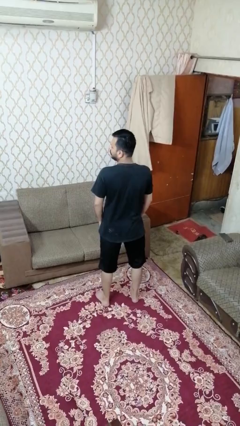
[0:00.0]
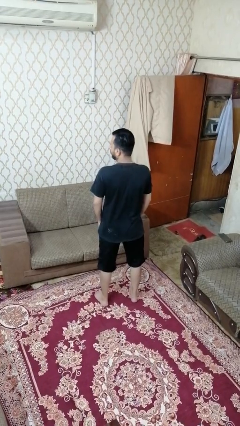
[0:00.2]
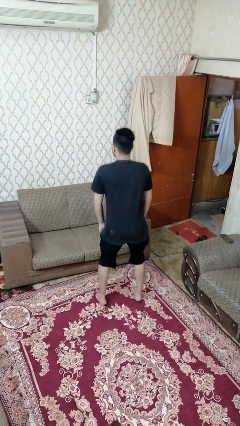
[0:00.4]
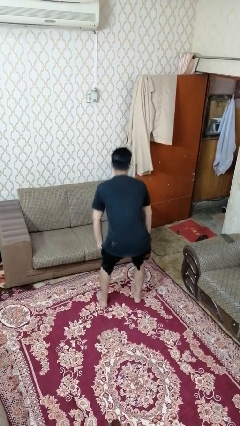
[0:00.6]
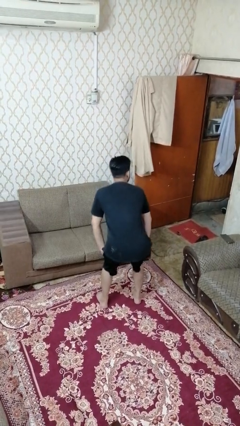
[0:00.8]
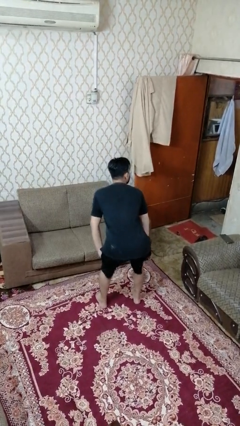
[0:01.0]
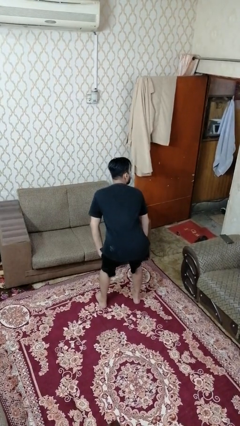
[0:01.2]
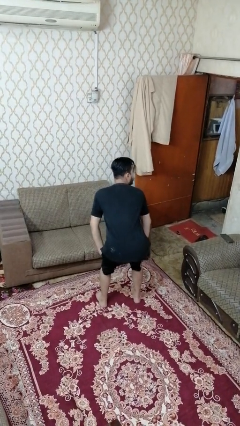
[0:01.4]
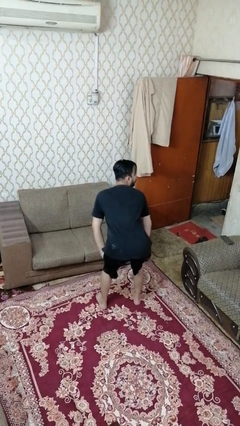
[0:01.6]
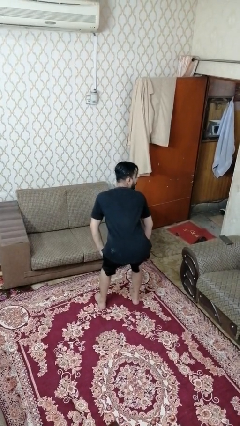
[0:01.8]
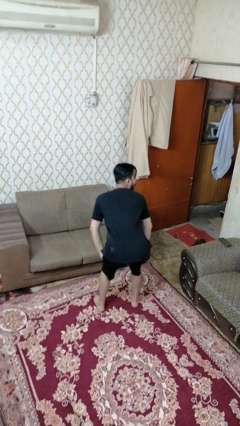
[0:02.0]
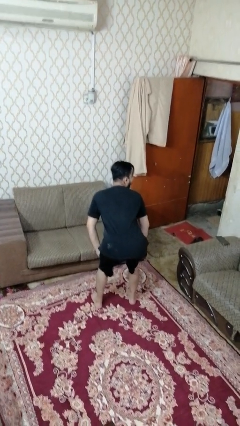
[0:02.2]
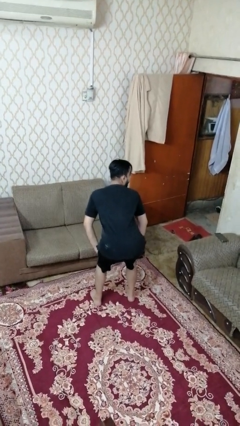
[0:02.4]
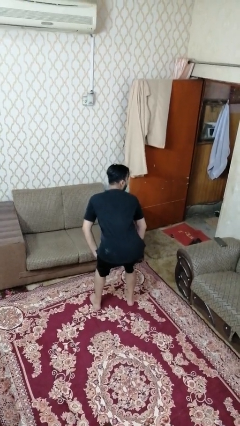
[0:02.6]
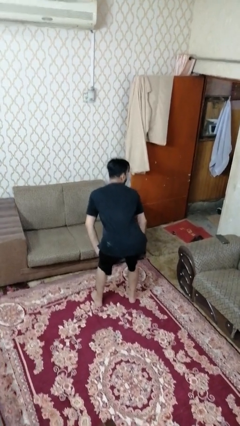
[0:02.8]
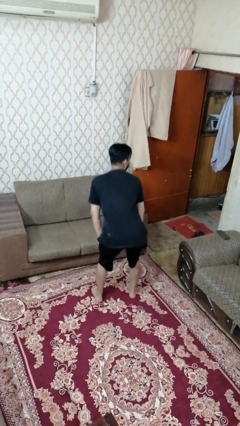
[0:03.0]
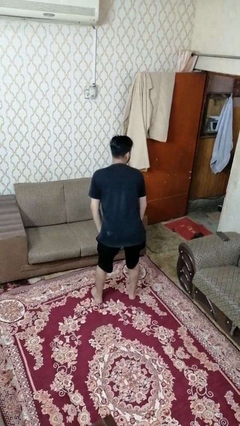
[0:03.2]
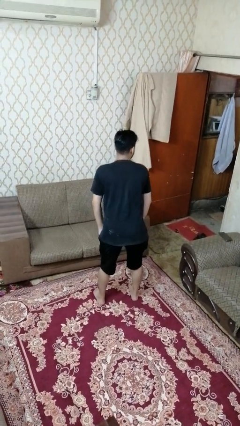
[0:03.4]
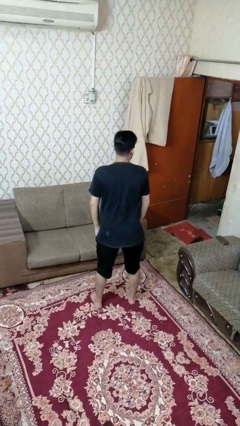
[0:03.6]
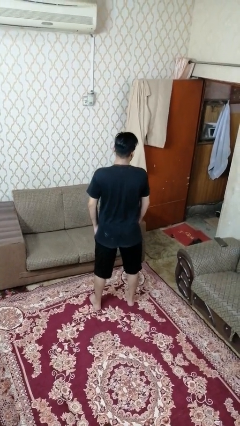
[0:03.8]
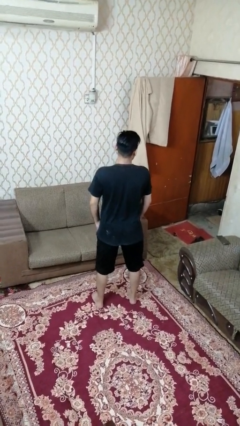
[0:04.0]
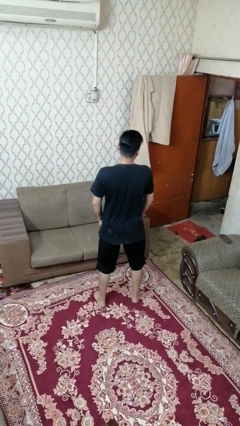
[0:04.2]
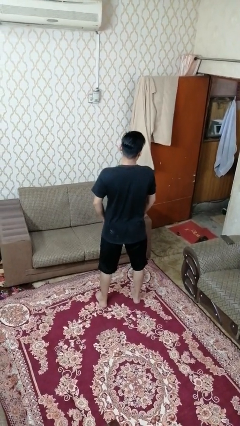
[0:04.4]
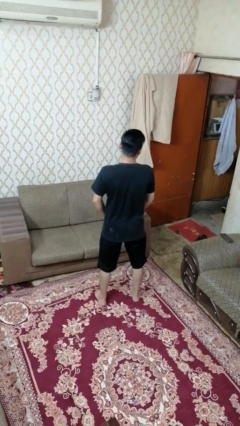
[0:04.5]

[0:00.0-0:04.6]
person wiggles hips

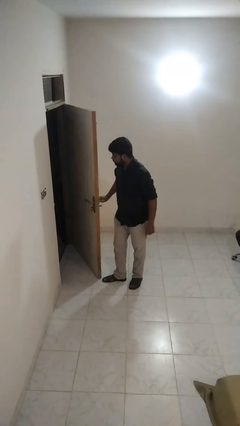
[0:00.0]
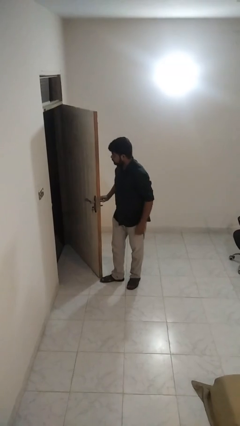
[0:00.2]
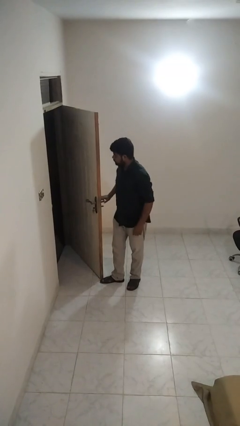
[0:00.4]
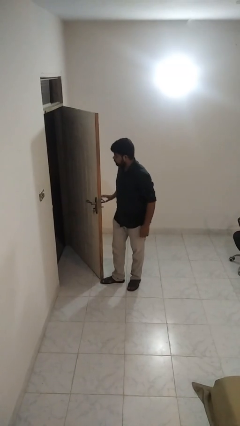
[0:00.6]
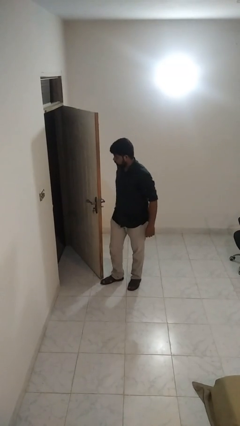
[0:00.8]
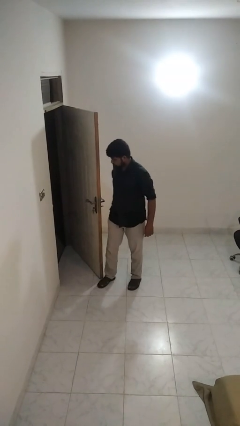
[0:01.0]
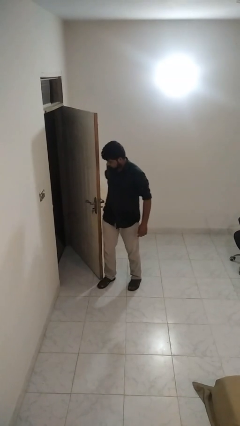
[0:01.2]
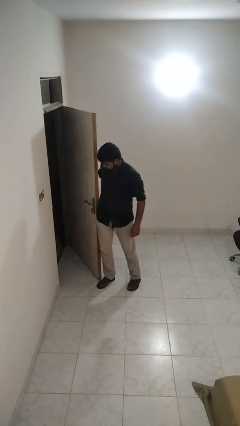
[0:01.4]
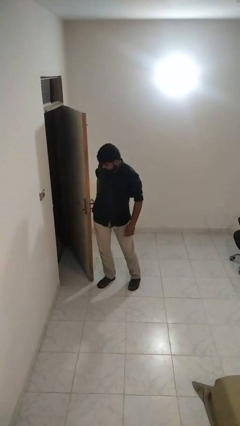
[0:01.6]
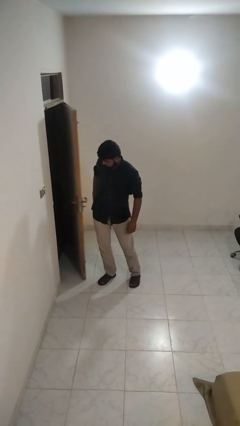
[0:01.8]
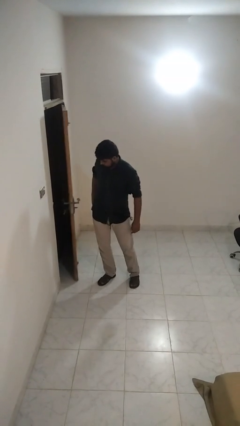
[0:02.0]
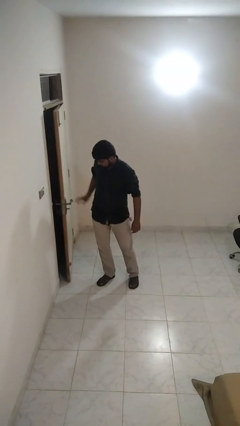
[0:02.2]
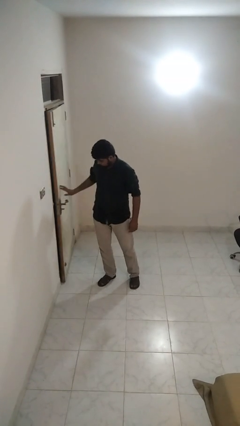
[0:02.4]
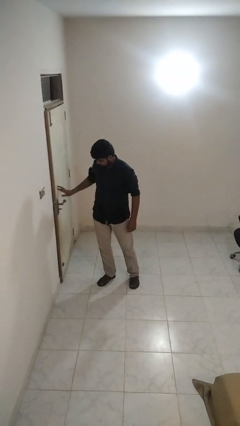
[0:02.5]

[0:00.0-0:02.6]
person closes door with hip

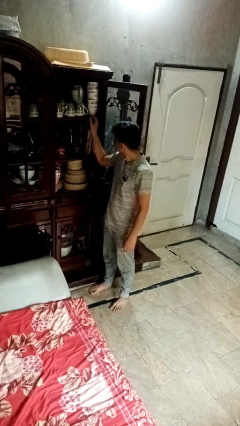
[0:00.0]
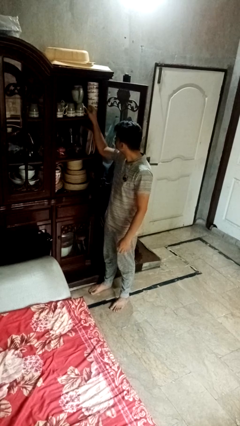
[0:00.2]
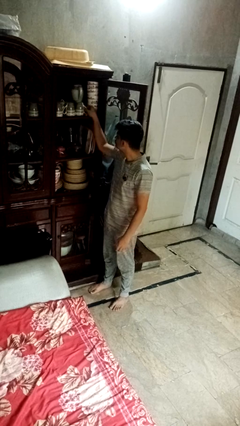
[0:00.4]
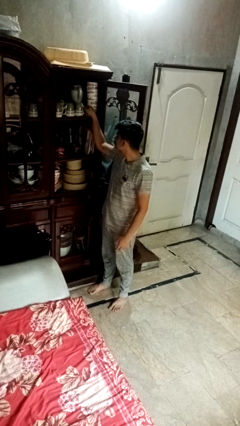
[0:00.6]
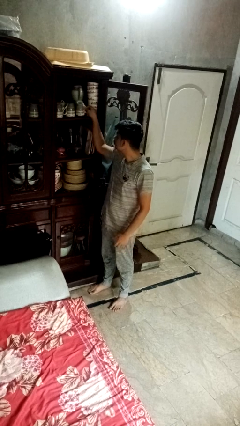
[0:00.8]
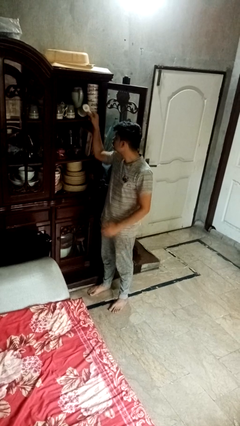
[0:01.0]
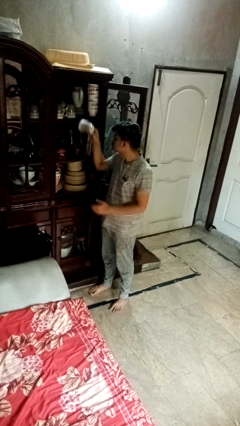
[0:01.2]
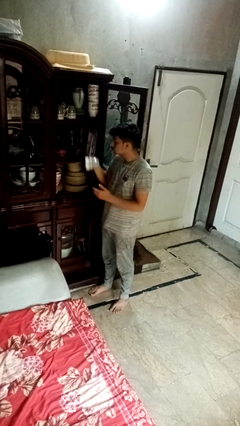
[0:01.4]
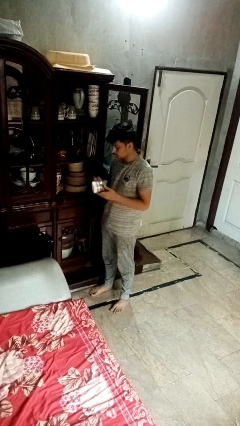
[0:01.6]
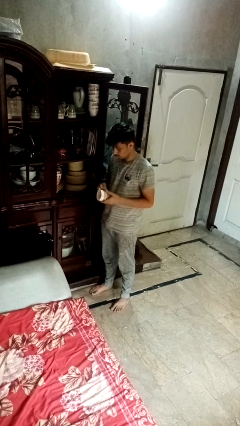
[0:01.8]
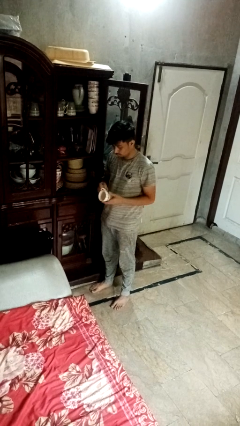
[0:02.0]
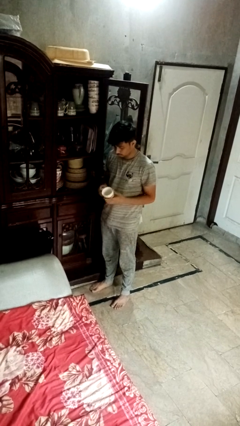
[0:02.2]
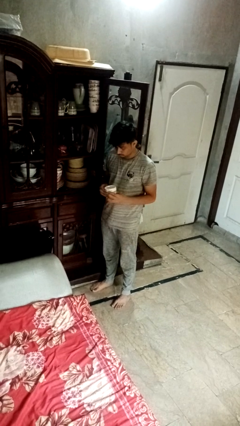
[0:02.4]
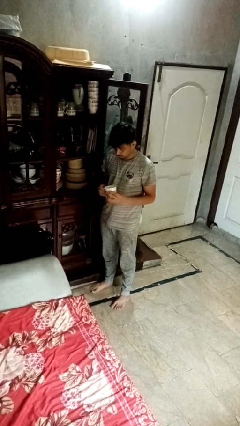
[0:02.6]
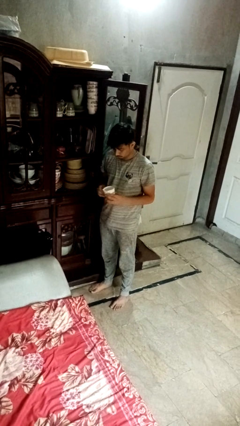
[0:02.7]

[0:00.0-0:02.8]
person takes object from cabinet

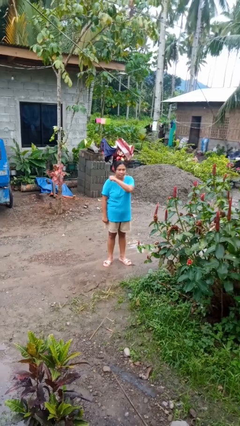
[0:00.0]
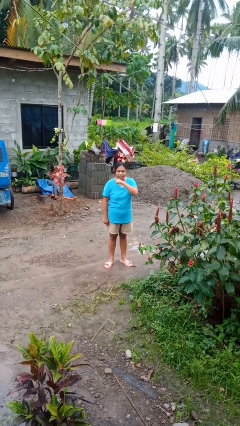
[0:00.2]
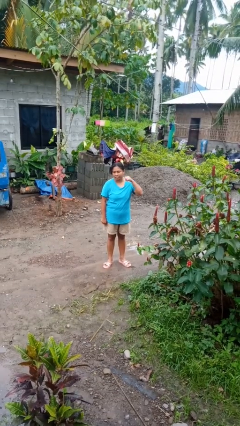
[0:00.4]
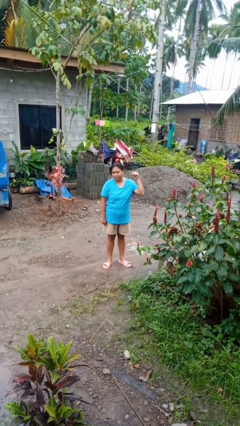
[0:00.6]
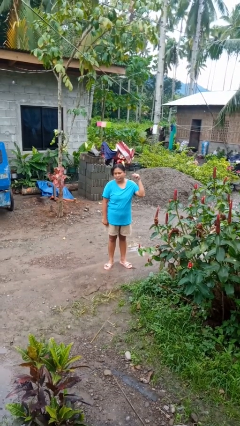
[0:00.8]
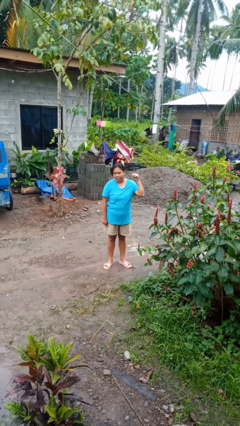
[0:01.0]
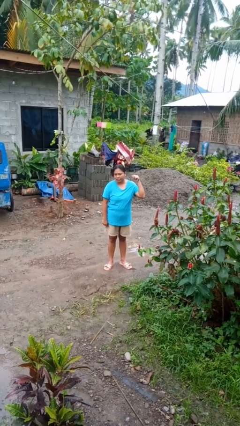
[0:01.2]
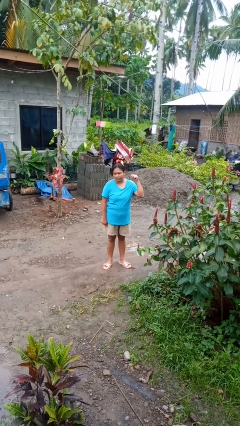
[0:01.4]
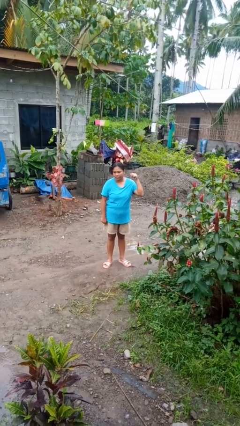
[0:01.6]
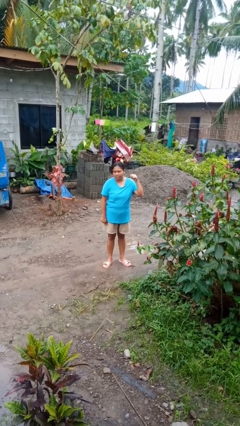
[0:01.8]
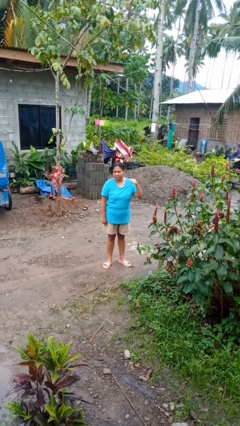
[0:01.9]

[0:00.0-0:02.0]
person gestures cut

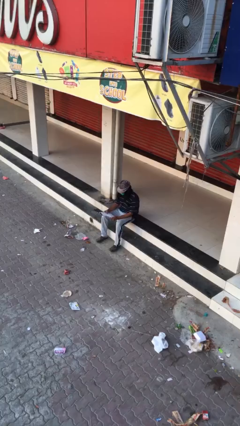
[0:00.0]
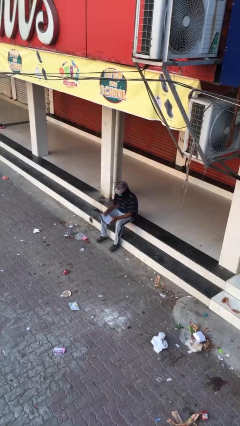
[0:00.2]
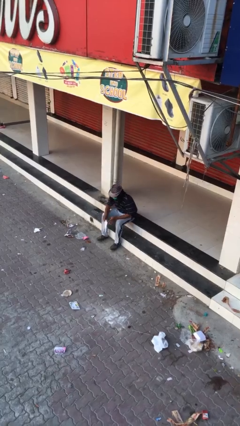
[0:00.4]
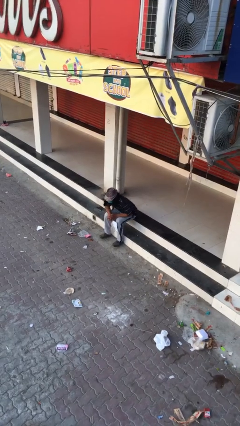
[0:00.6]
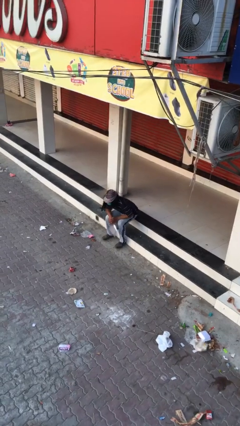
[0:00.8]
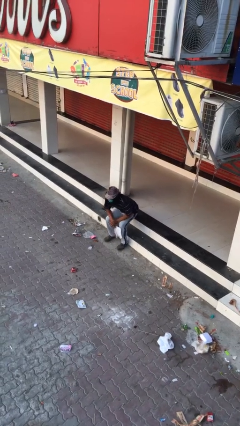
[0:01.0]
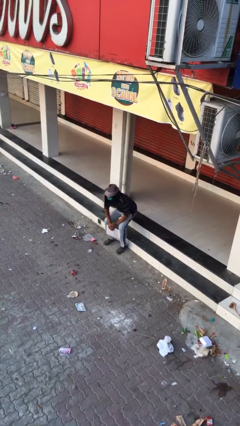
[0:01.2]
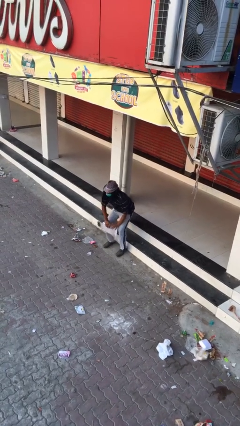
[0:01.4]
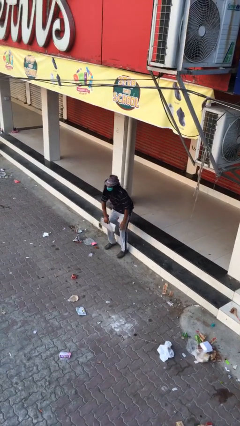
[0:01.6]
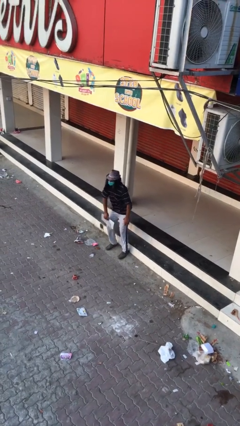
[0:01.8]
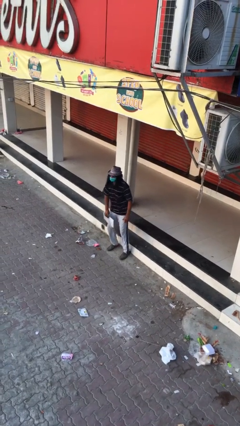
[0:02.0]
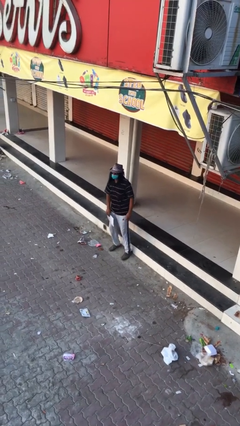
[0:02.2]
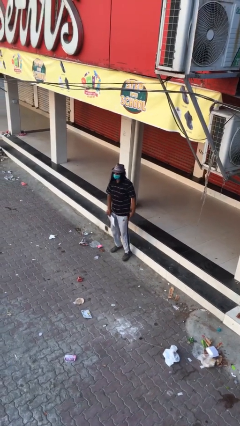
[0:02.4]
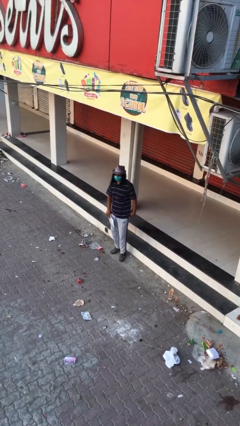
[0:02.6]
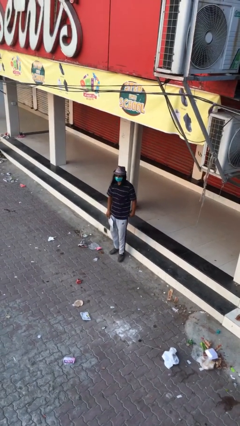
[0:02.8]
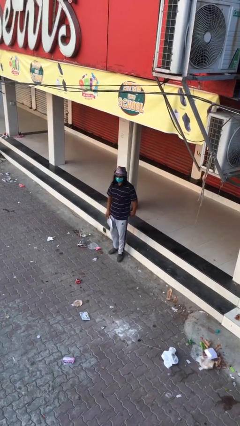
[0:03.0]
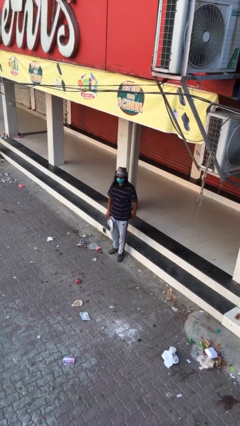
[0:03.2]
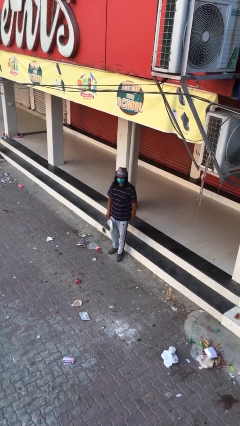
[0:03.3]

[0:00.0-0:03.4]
person stands up

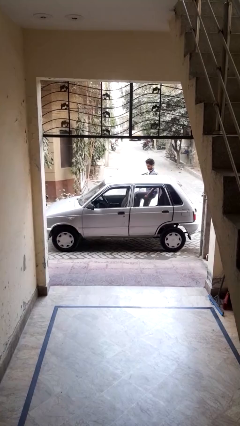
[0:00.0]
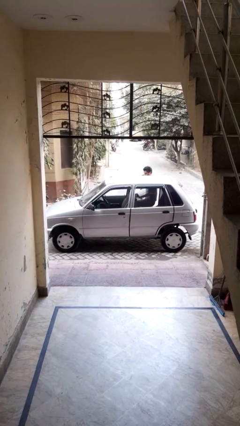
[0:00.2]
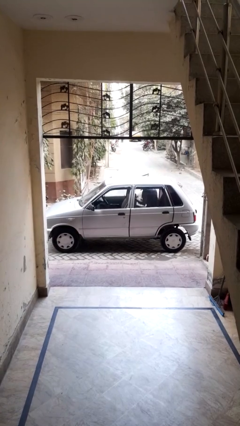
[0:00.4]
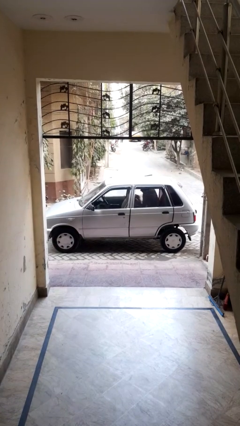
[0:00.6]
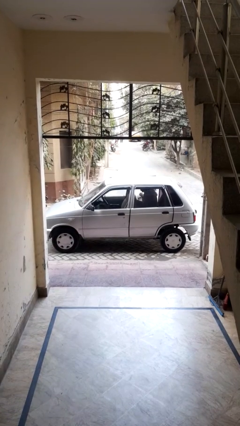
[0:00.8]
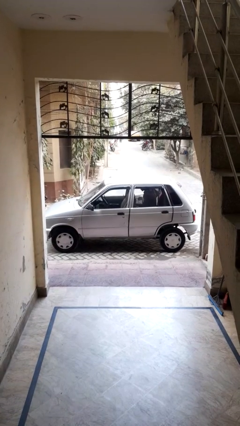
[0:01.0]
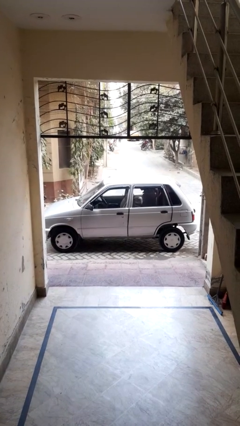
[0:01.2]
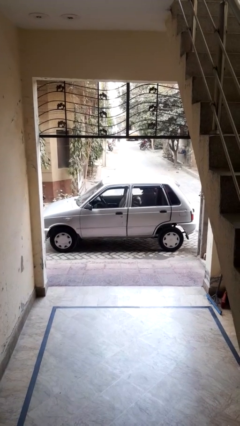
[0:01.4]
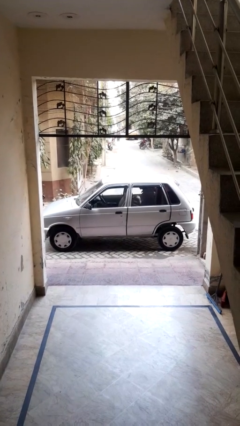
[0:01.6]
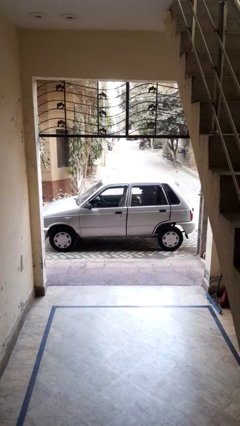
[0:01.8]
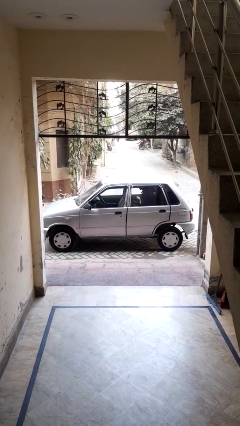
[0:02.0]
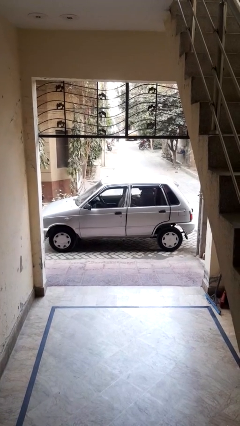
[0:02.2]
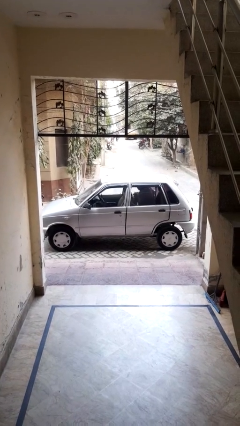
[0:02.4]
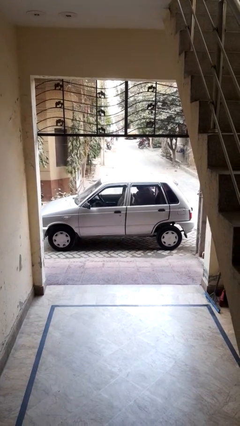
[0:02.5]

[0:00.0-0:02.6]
car picks up person
